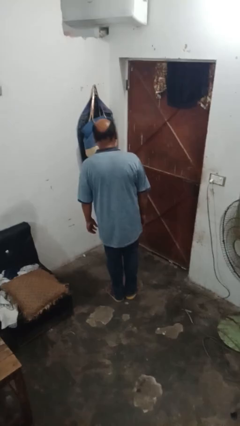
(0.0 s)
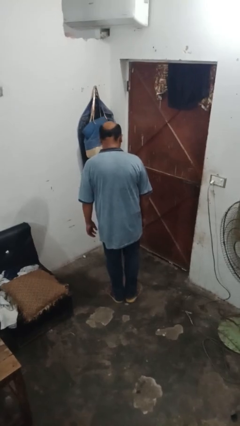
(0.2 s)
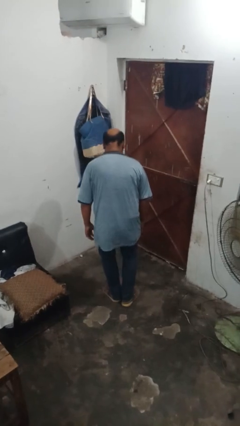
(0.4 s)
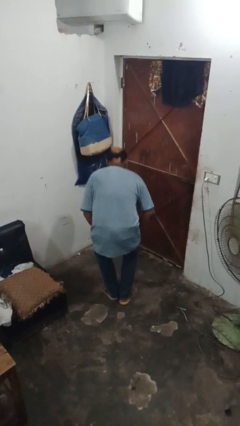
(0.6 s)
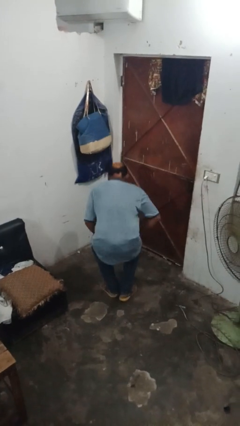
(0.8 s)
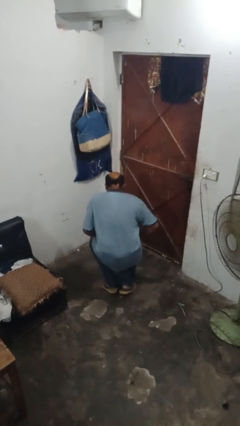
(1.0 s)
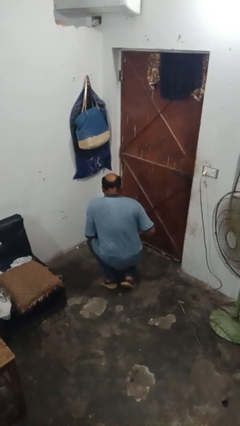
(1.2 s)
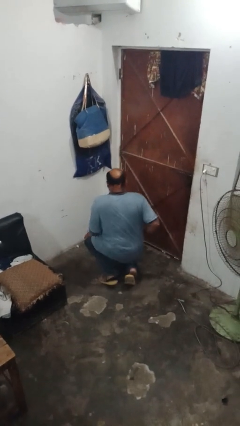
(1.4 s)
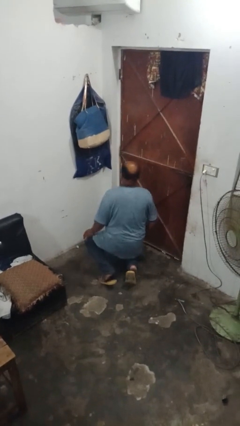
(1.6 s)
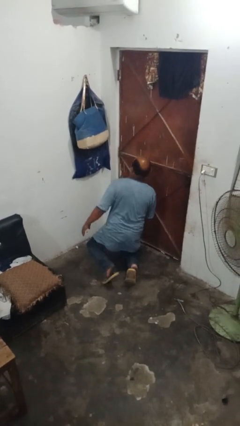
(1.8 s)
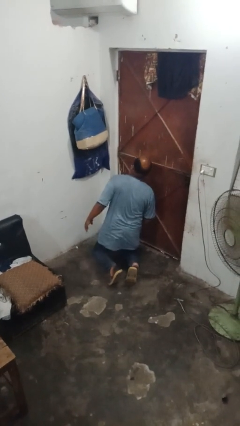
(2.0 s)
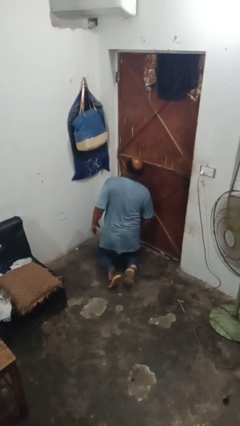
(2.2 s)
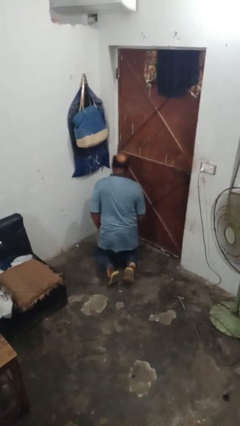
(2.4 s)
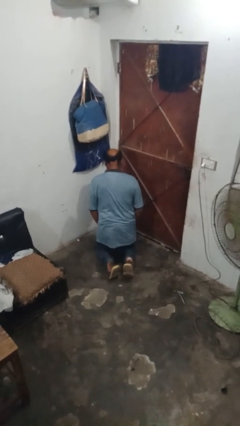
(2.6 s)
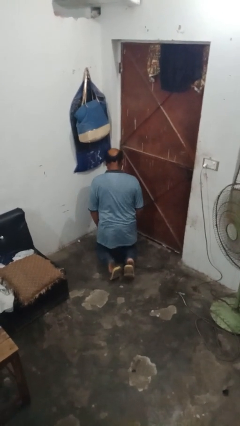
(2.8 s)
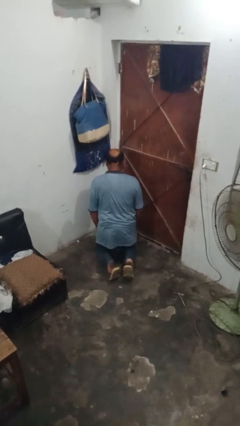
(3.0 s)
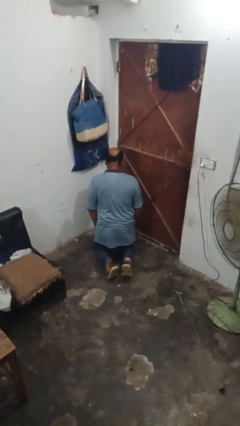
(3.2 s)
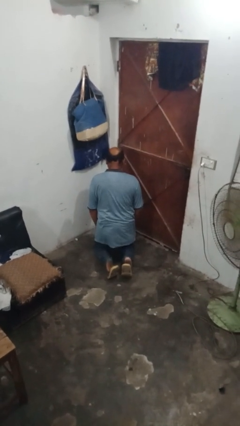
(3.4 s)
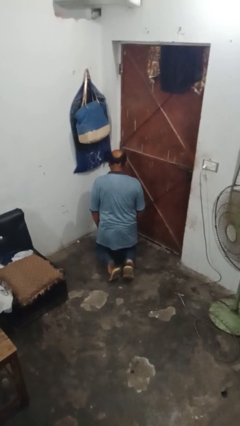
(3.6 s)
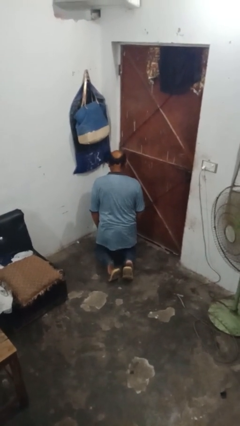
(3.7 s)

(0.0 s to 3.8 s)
person squats

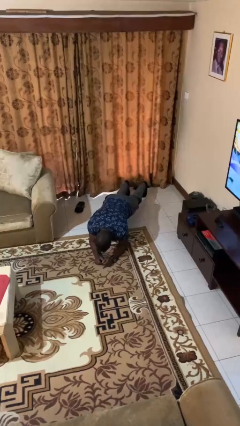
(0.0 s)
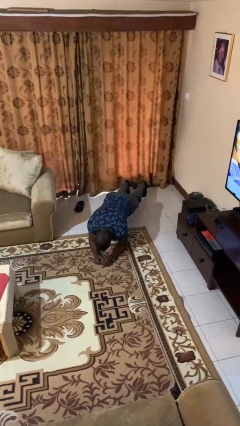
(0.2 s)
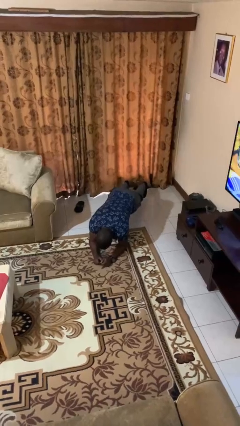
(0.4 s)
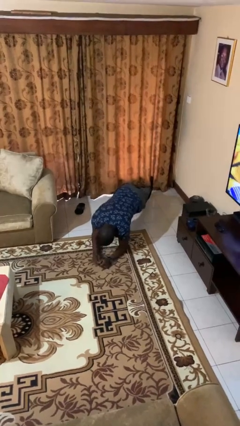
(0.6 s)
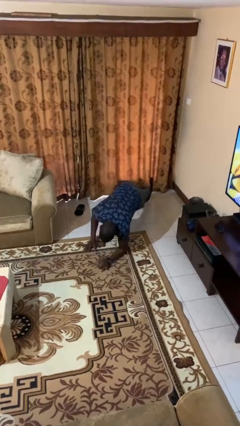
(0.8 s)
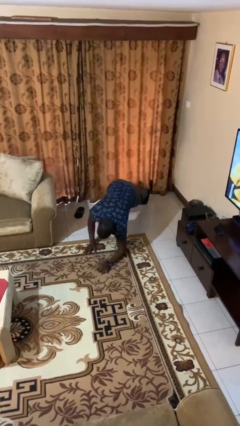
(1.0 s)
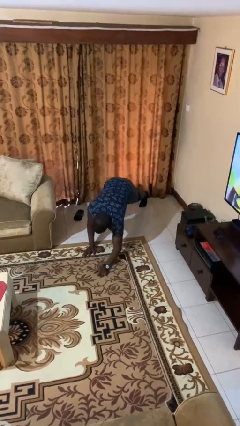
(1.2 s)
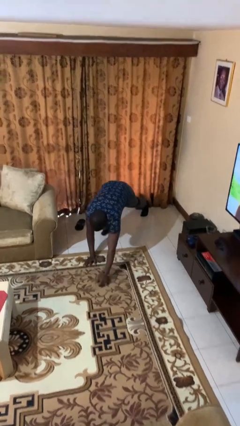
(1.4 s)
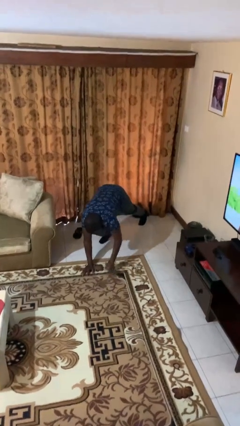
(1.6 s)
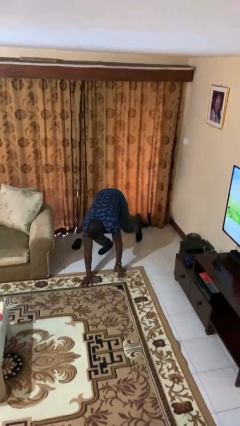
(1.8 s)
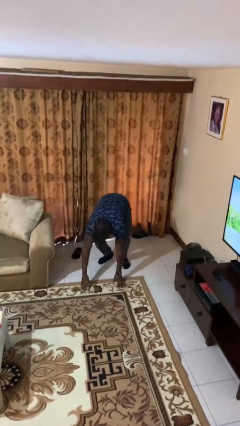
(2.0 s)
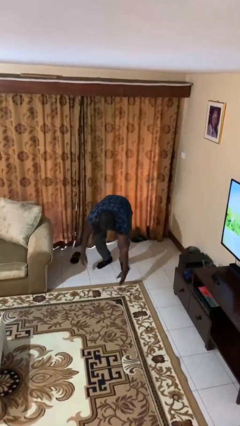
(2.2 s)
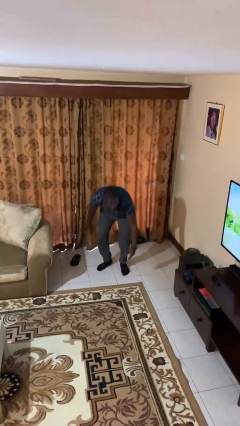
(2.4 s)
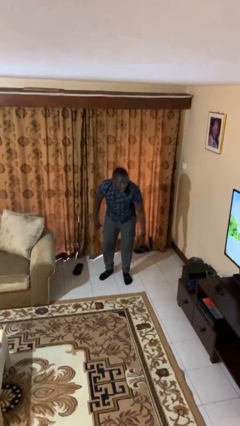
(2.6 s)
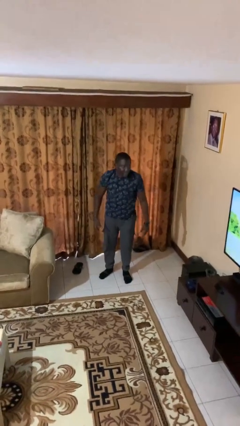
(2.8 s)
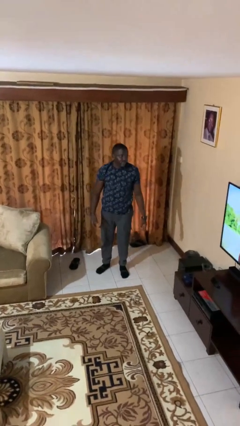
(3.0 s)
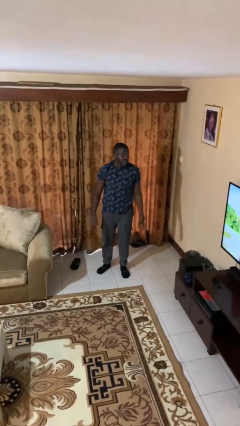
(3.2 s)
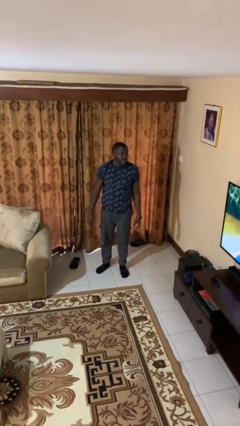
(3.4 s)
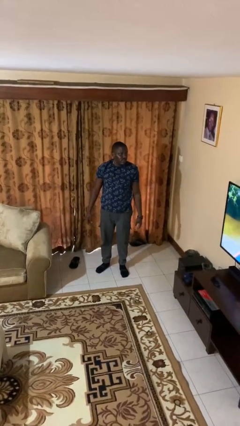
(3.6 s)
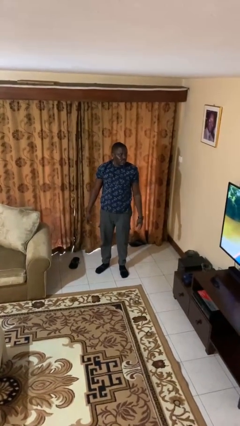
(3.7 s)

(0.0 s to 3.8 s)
person stands up from floor

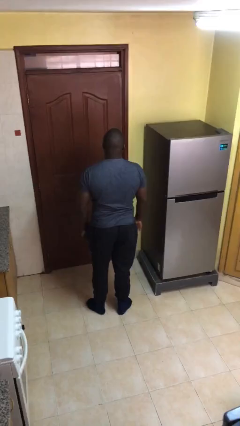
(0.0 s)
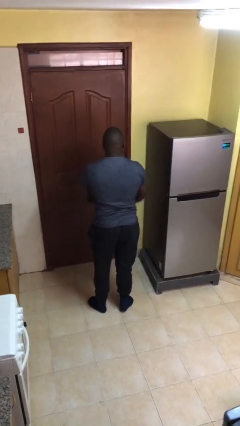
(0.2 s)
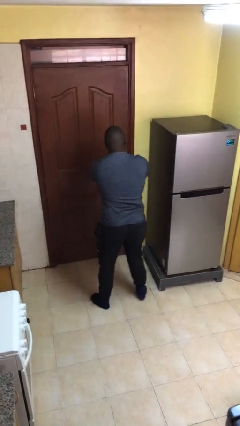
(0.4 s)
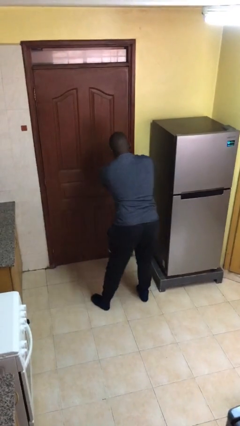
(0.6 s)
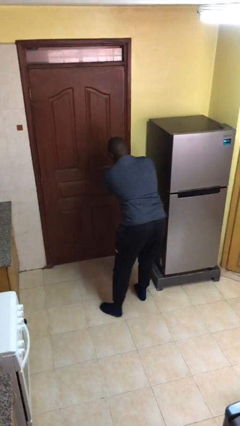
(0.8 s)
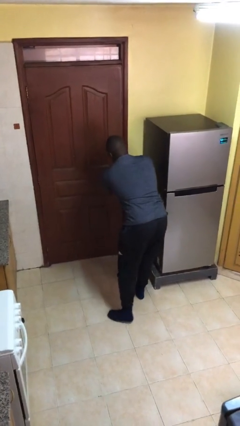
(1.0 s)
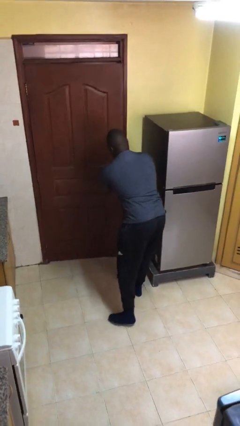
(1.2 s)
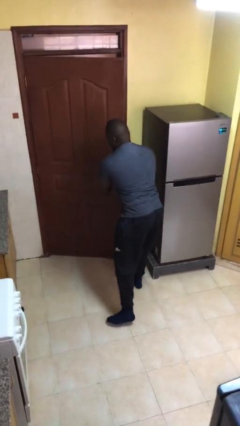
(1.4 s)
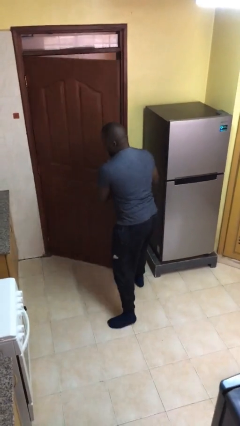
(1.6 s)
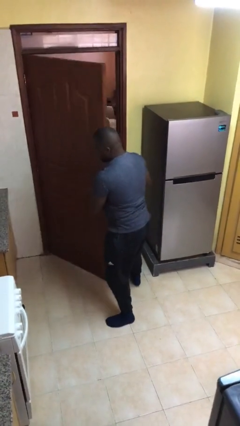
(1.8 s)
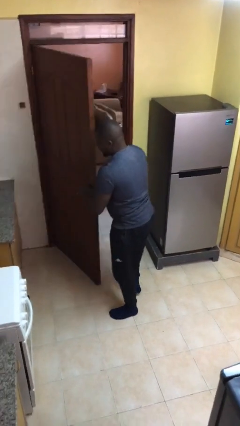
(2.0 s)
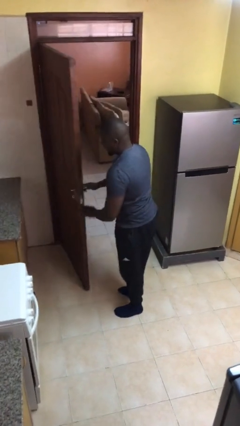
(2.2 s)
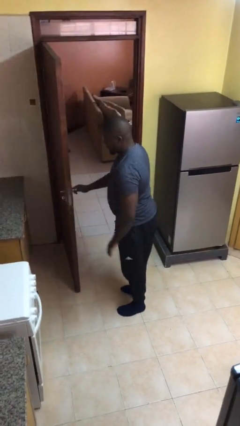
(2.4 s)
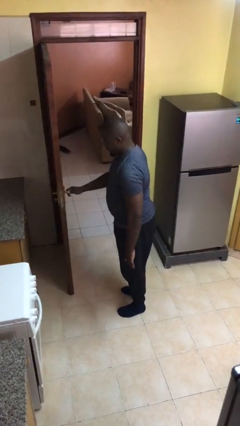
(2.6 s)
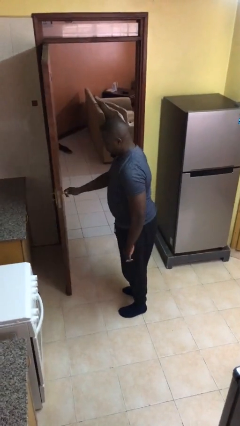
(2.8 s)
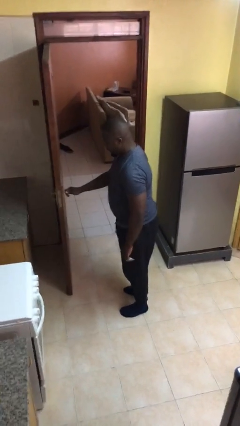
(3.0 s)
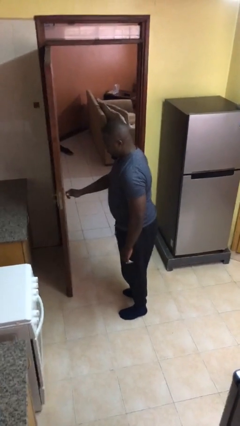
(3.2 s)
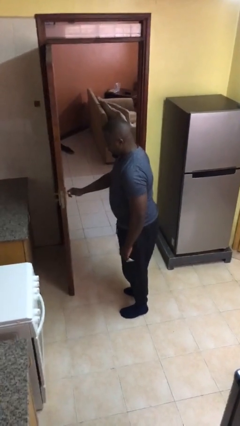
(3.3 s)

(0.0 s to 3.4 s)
person opens facility door

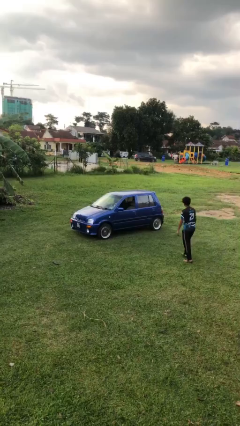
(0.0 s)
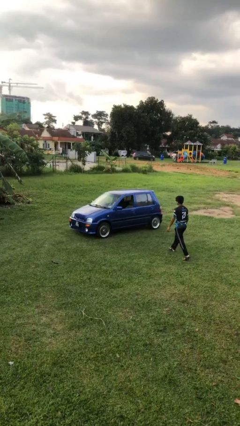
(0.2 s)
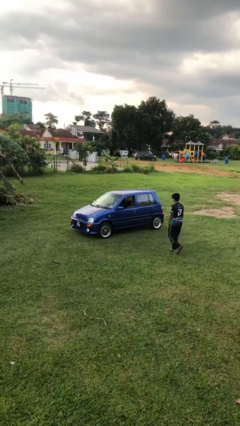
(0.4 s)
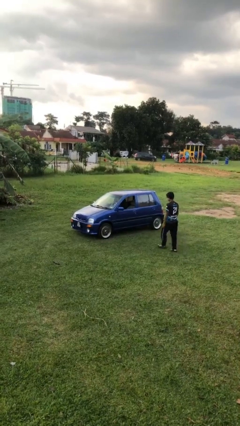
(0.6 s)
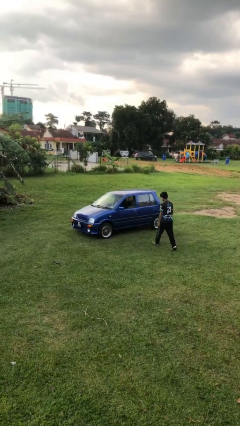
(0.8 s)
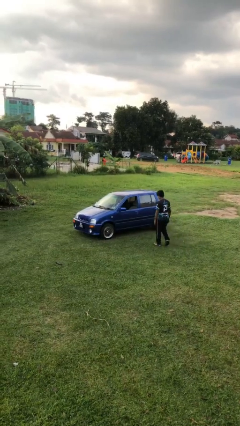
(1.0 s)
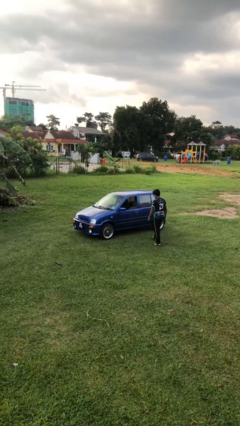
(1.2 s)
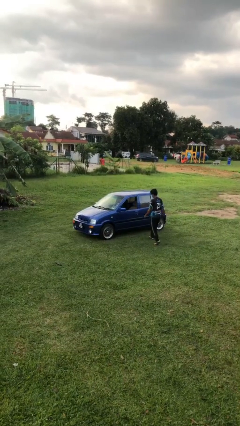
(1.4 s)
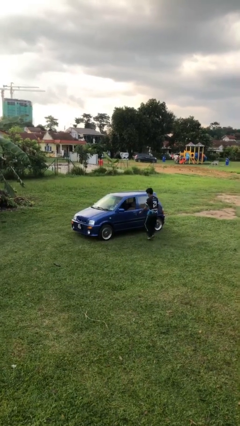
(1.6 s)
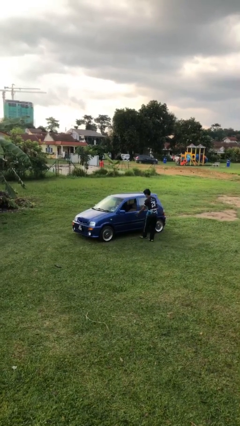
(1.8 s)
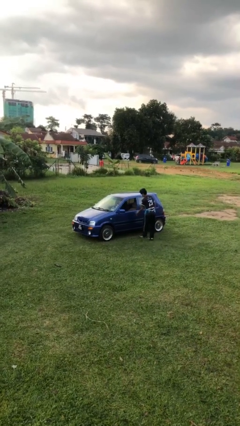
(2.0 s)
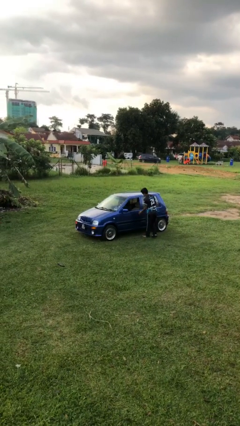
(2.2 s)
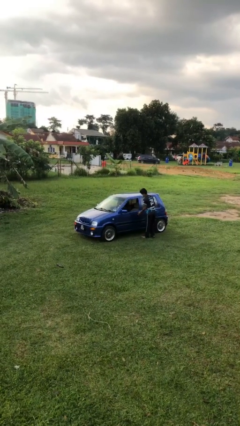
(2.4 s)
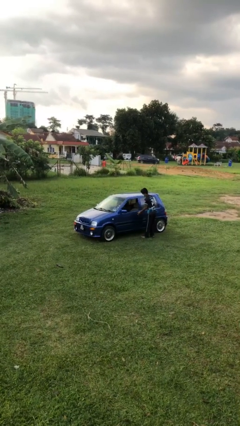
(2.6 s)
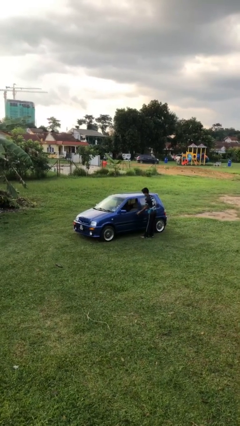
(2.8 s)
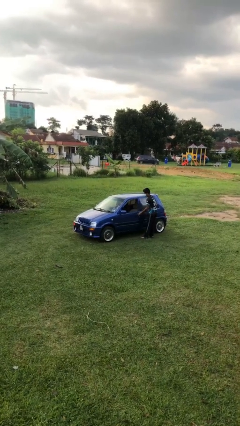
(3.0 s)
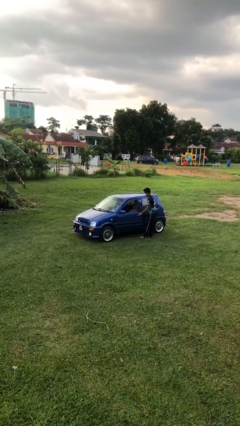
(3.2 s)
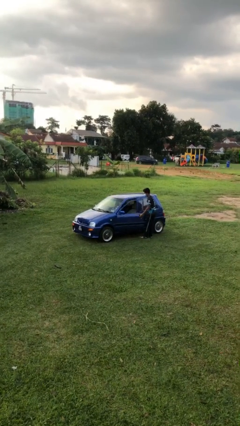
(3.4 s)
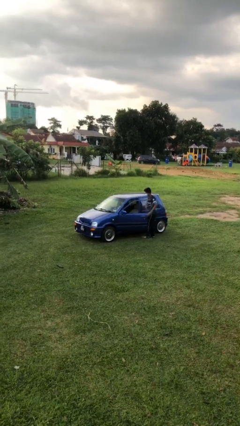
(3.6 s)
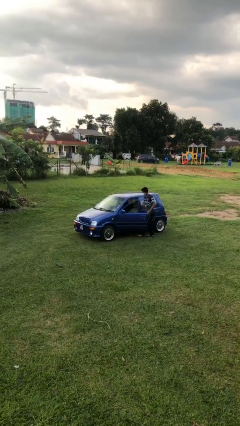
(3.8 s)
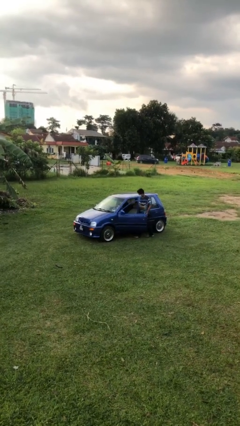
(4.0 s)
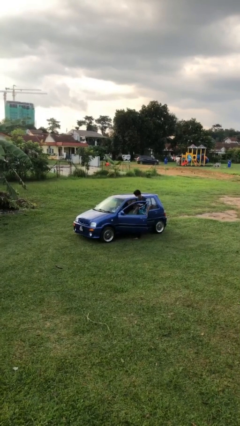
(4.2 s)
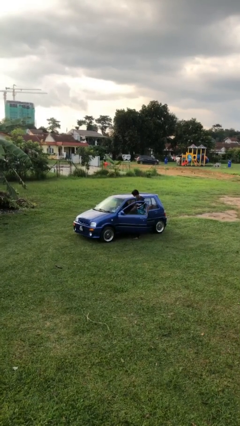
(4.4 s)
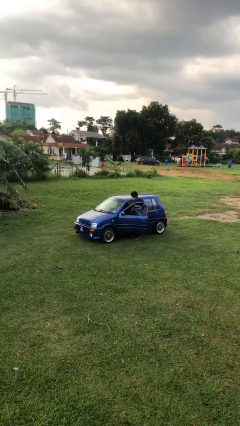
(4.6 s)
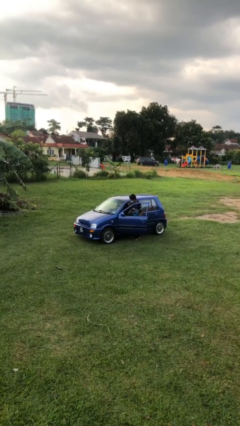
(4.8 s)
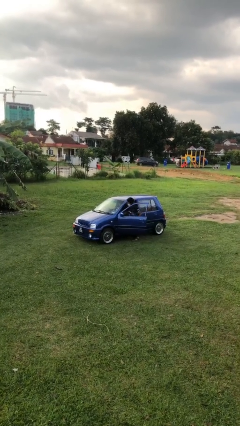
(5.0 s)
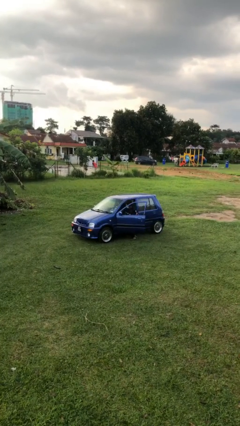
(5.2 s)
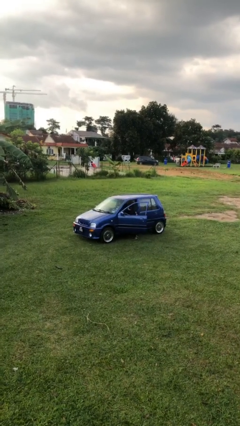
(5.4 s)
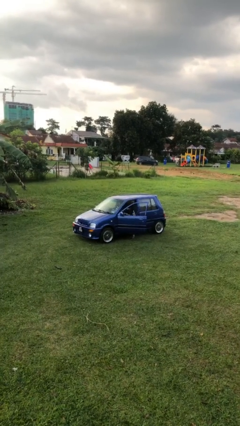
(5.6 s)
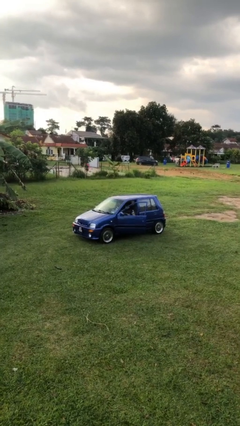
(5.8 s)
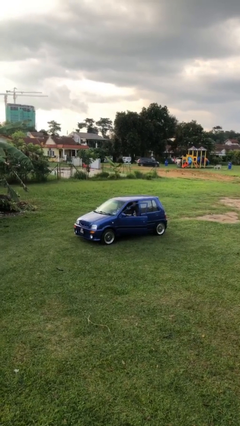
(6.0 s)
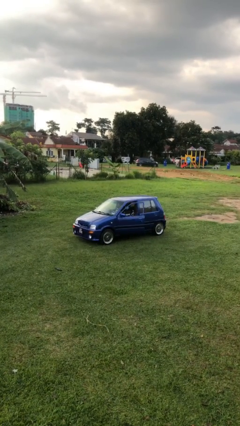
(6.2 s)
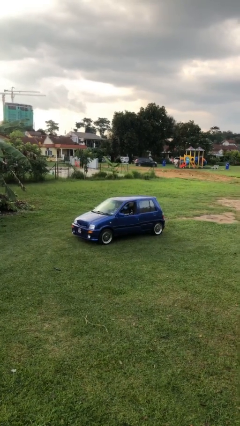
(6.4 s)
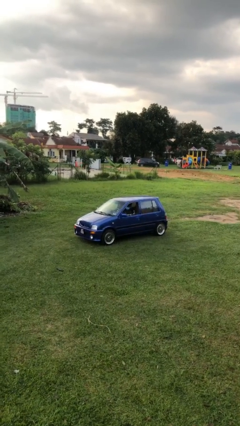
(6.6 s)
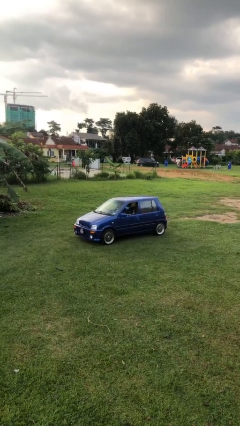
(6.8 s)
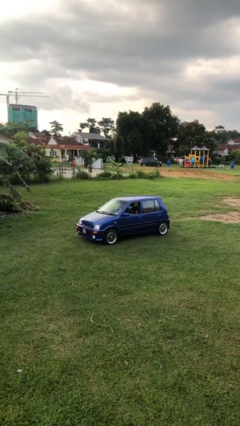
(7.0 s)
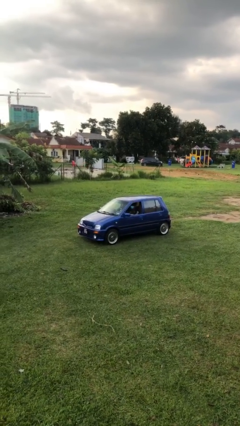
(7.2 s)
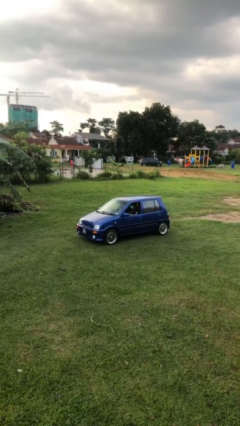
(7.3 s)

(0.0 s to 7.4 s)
car picks up person
